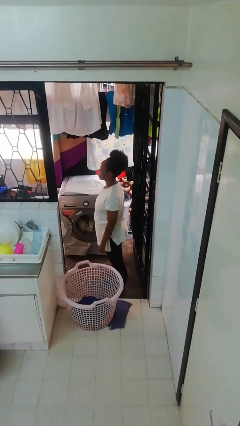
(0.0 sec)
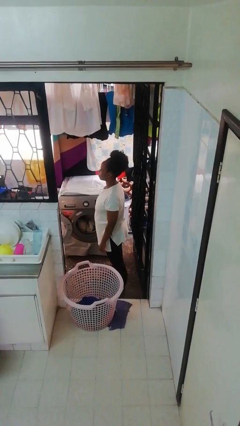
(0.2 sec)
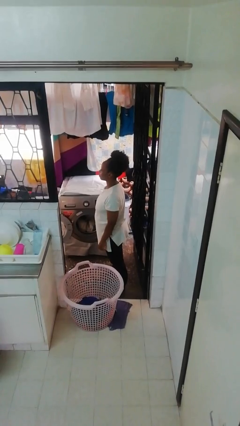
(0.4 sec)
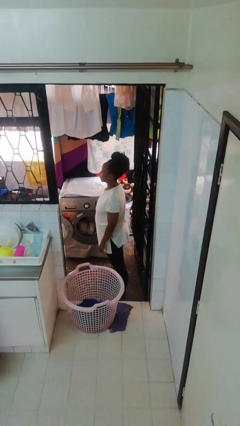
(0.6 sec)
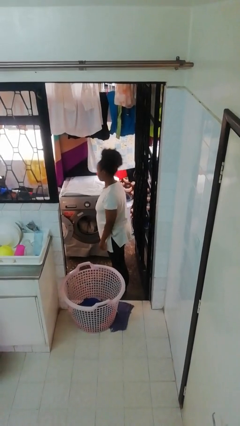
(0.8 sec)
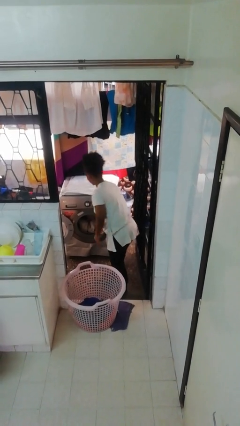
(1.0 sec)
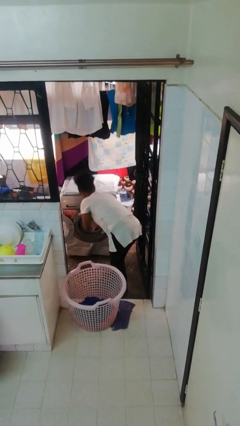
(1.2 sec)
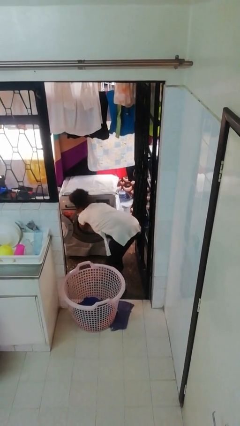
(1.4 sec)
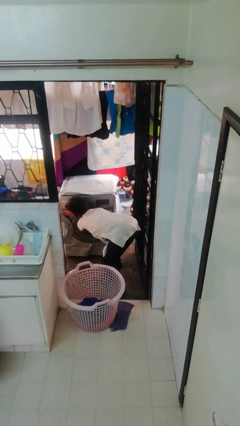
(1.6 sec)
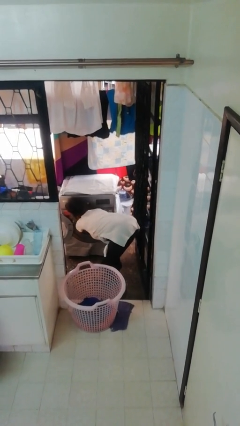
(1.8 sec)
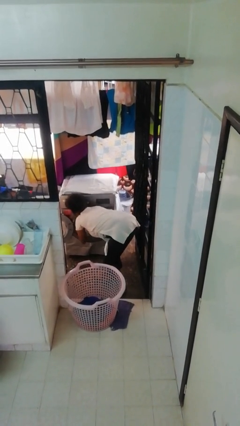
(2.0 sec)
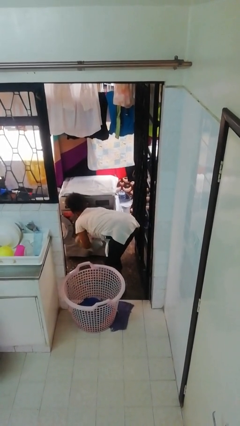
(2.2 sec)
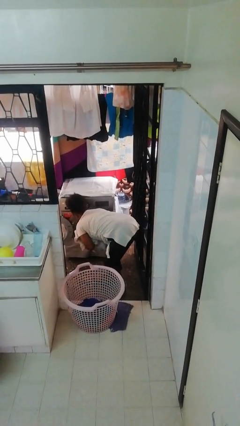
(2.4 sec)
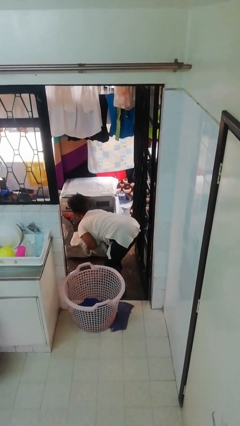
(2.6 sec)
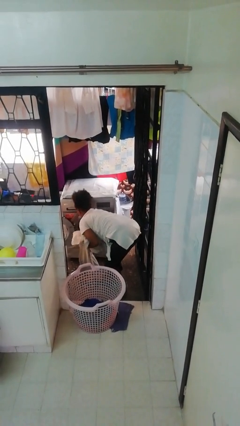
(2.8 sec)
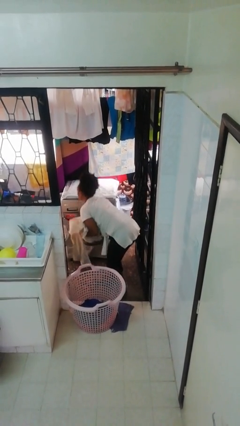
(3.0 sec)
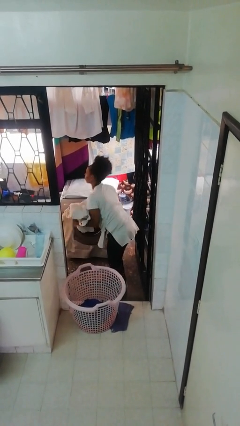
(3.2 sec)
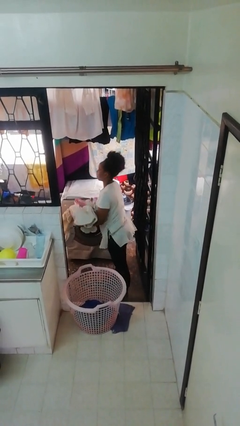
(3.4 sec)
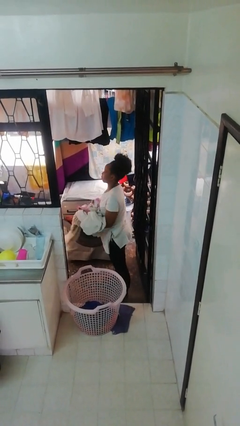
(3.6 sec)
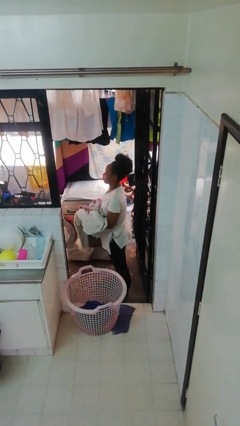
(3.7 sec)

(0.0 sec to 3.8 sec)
person unloads dryer

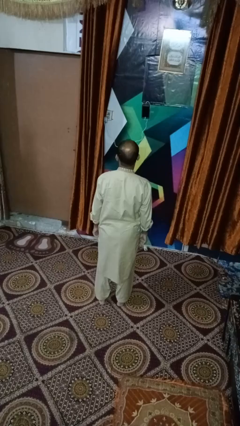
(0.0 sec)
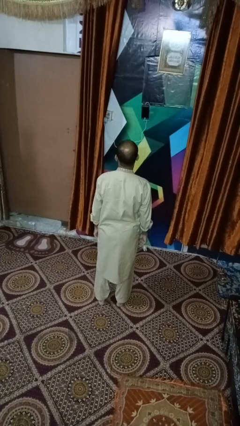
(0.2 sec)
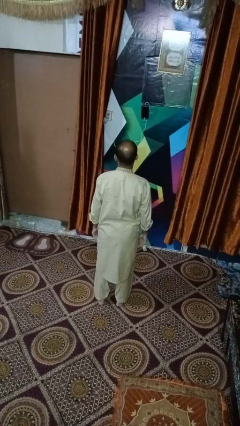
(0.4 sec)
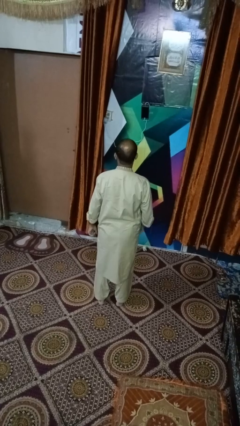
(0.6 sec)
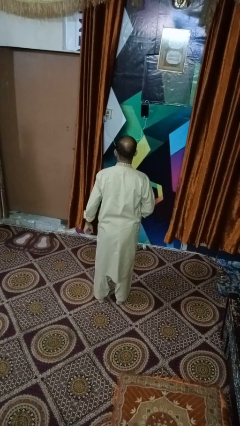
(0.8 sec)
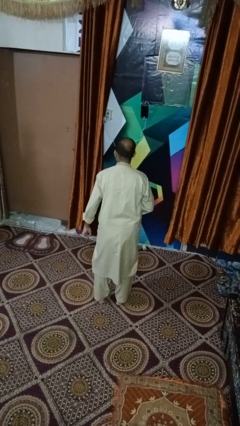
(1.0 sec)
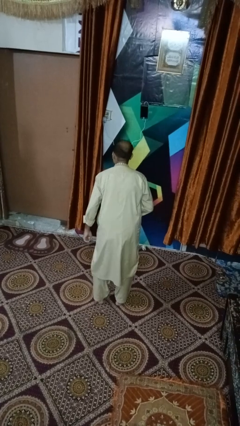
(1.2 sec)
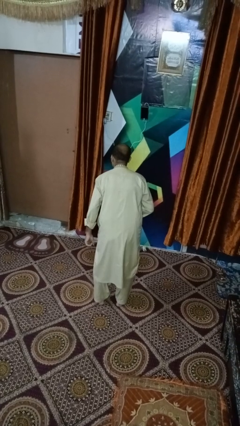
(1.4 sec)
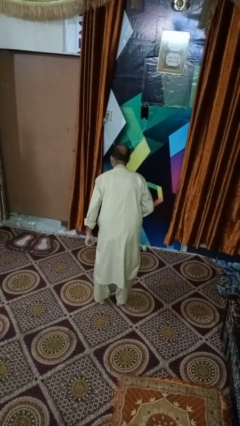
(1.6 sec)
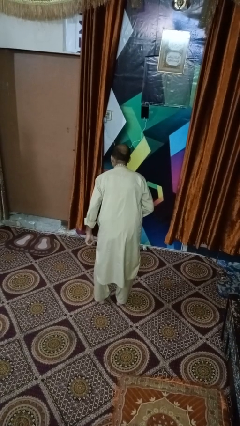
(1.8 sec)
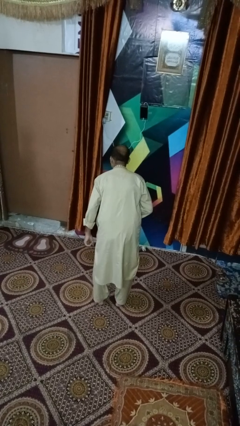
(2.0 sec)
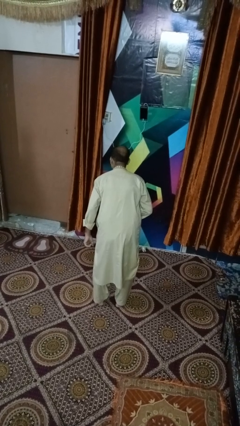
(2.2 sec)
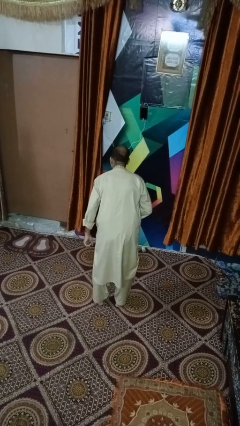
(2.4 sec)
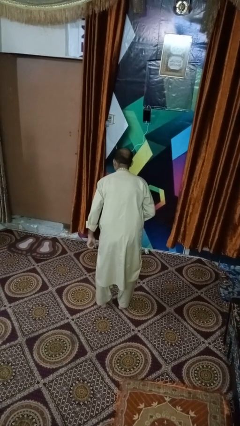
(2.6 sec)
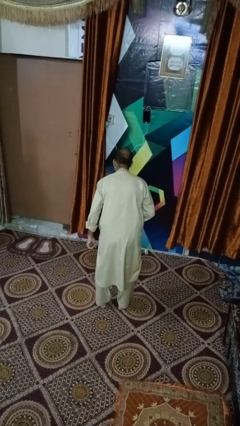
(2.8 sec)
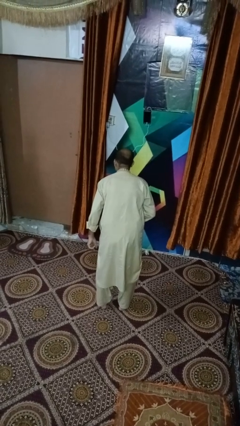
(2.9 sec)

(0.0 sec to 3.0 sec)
person bows

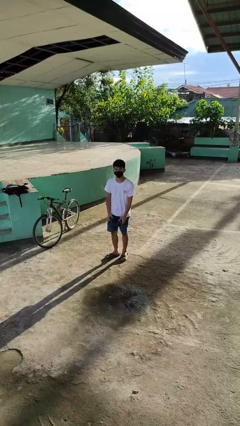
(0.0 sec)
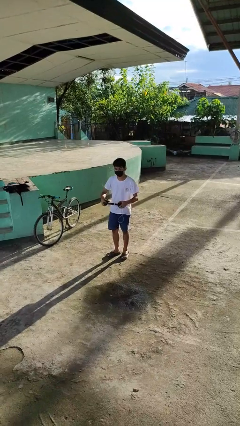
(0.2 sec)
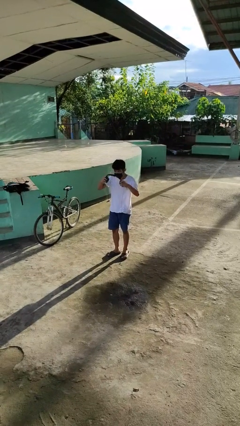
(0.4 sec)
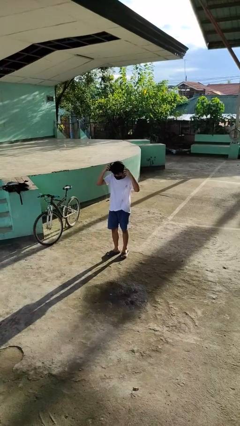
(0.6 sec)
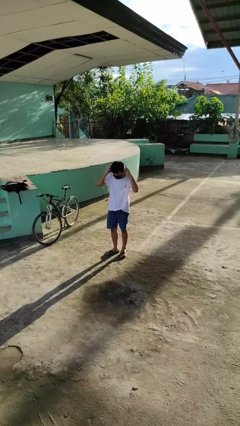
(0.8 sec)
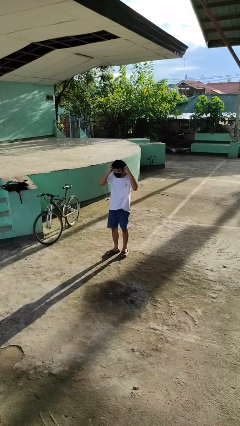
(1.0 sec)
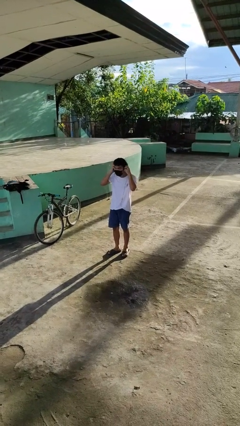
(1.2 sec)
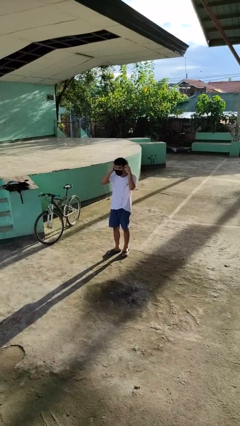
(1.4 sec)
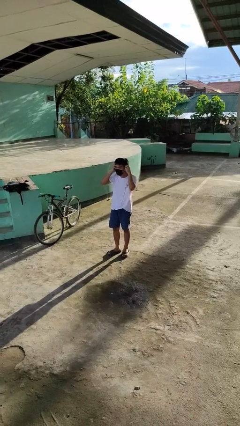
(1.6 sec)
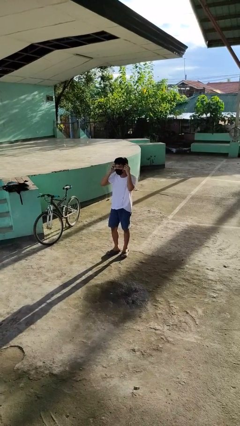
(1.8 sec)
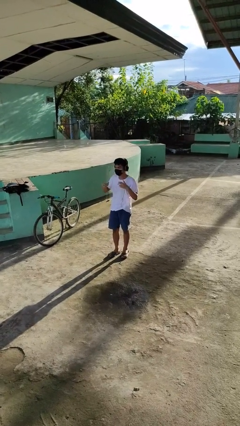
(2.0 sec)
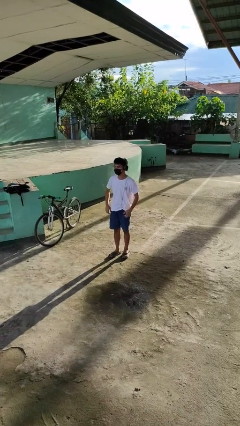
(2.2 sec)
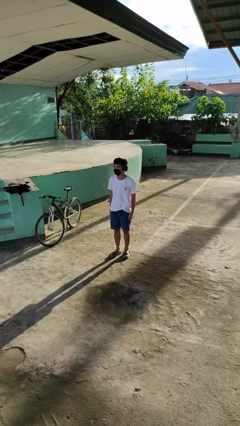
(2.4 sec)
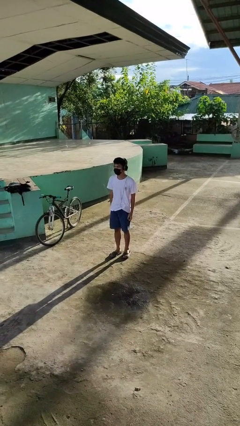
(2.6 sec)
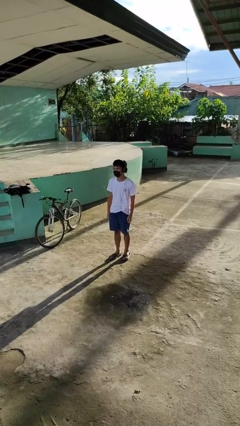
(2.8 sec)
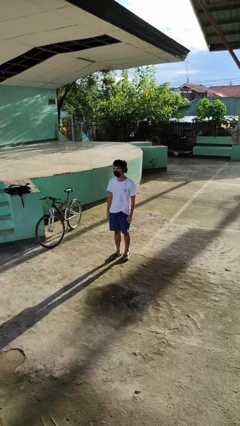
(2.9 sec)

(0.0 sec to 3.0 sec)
person puts on headphones

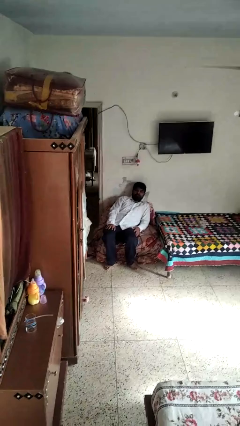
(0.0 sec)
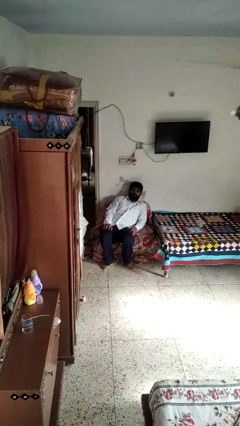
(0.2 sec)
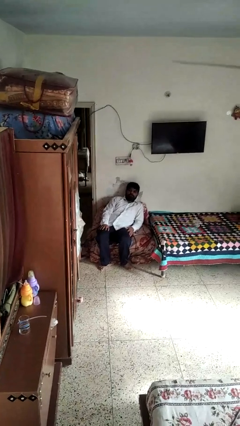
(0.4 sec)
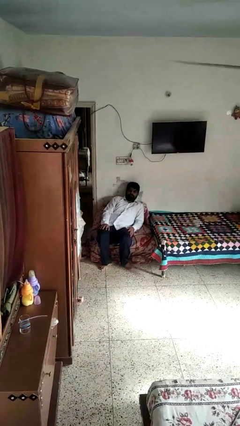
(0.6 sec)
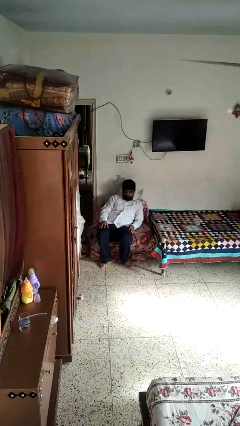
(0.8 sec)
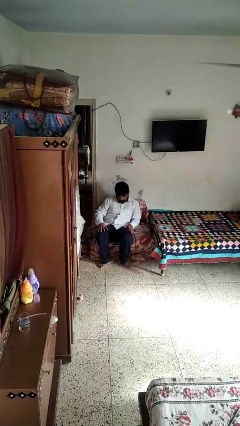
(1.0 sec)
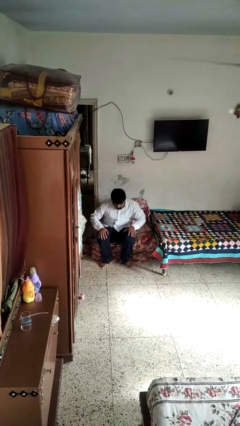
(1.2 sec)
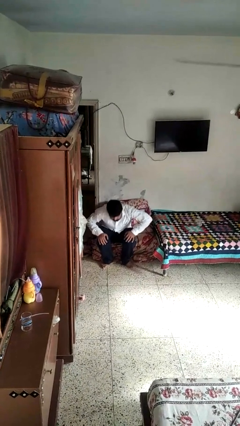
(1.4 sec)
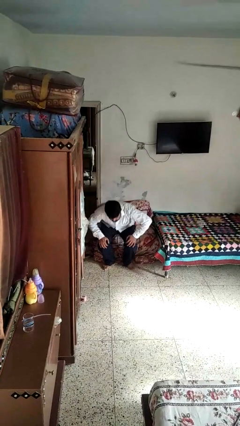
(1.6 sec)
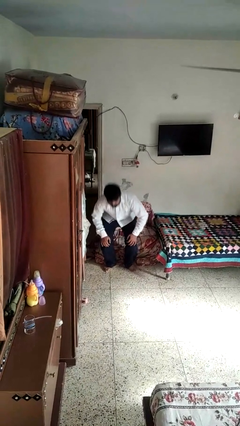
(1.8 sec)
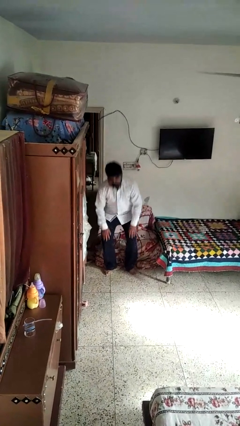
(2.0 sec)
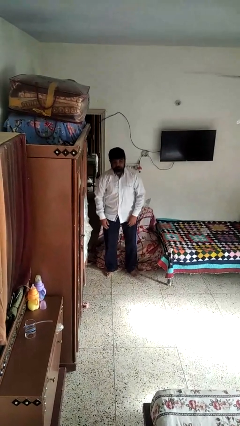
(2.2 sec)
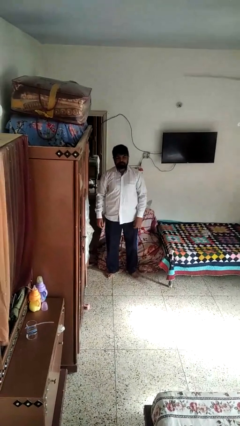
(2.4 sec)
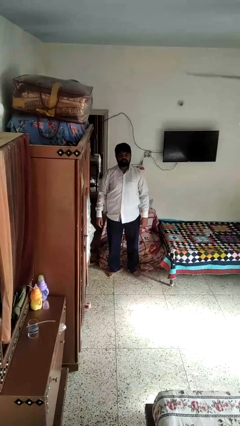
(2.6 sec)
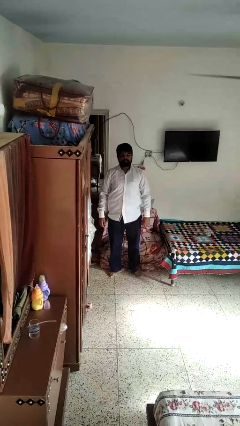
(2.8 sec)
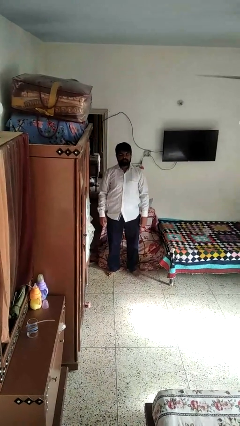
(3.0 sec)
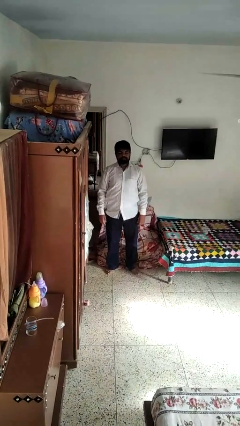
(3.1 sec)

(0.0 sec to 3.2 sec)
person stands up

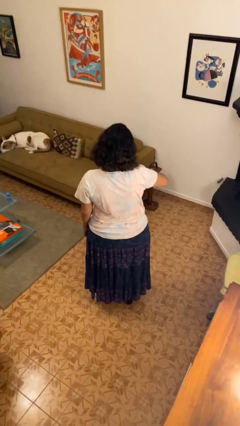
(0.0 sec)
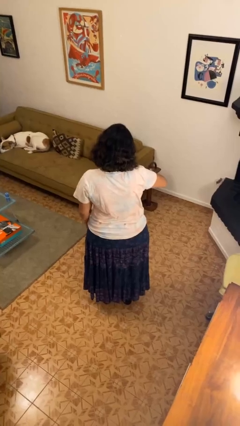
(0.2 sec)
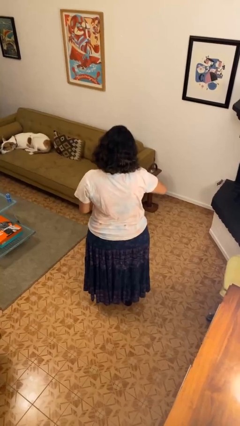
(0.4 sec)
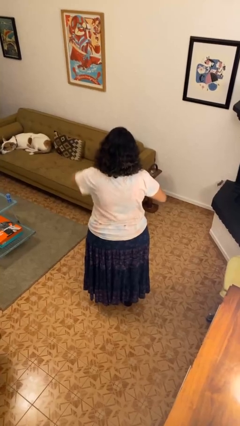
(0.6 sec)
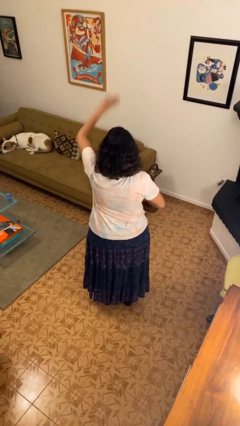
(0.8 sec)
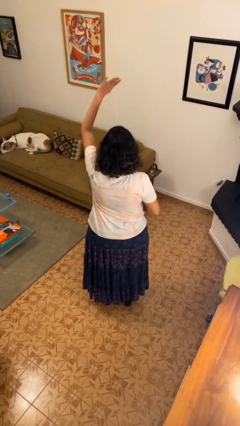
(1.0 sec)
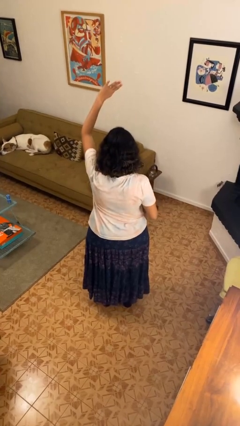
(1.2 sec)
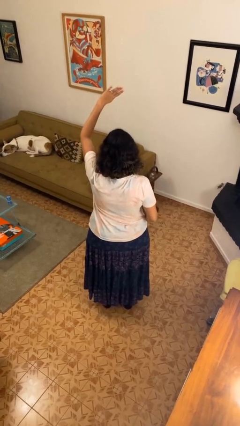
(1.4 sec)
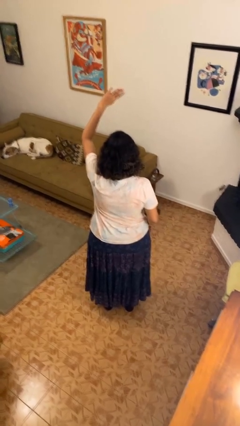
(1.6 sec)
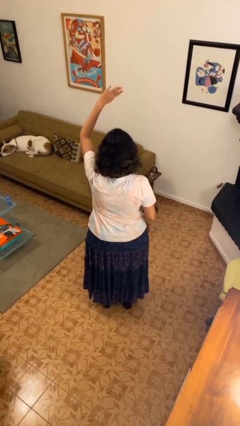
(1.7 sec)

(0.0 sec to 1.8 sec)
person gestures swipe up

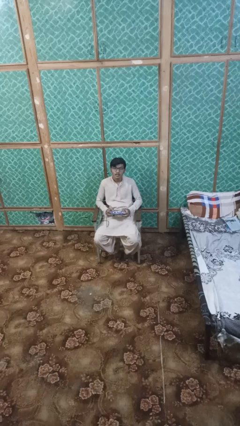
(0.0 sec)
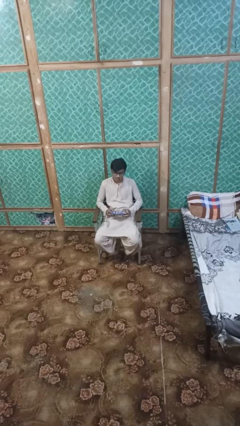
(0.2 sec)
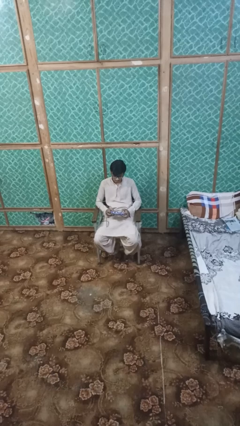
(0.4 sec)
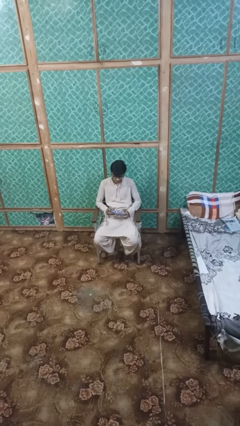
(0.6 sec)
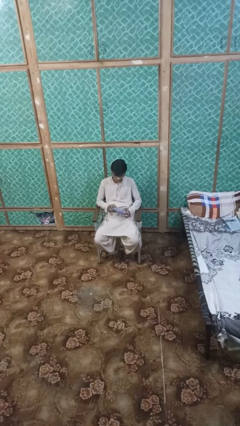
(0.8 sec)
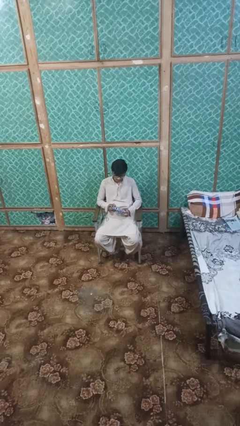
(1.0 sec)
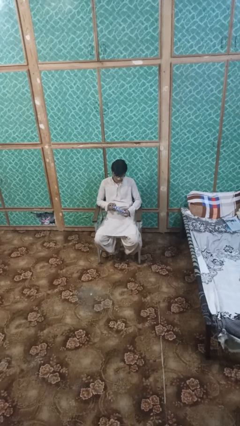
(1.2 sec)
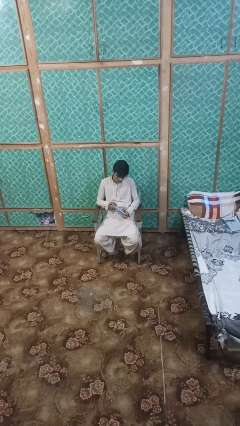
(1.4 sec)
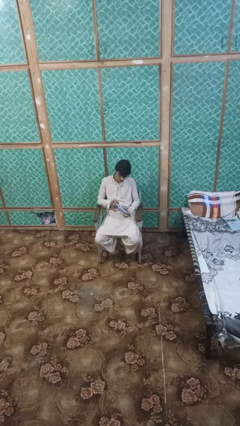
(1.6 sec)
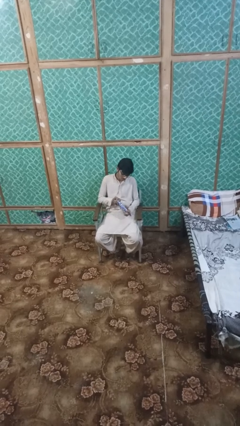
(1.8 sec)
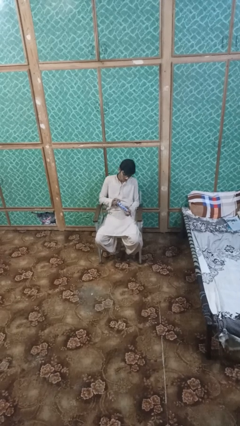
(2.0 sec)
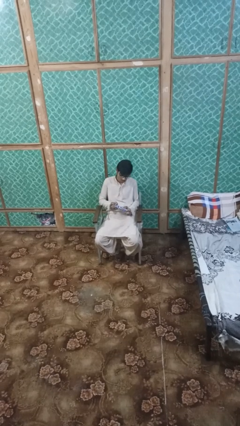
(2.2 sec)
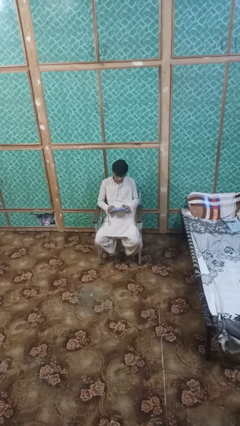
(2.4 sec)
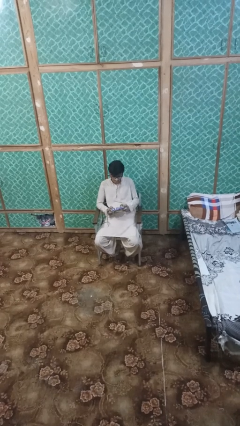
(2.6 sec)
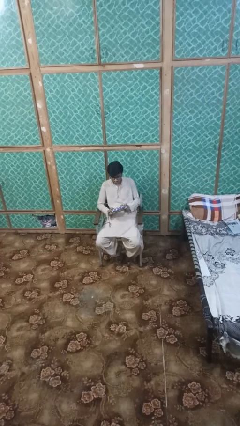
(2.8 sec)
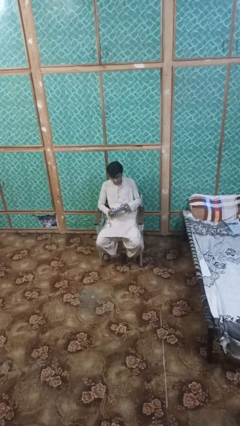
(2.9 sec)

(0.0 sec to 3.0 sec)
person interacts with handheld game
